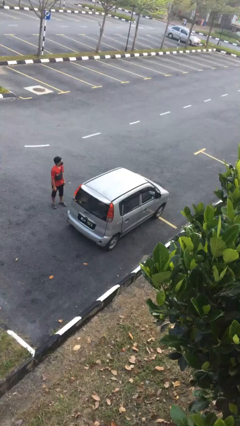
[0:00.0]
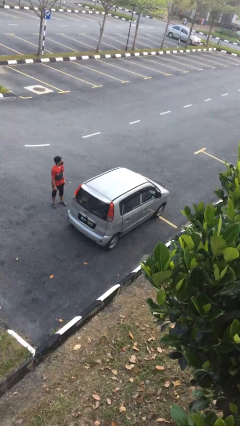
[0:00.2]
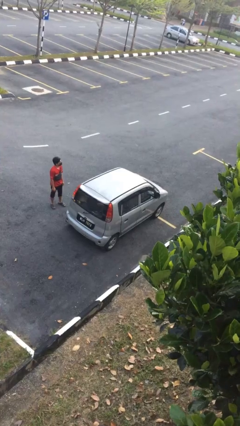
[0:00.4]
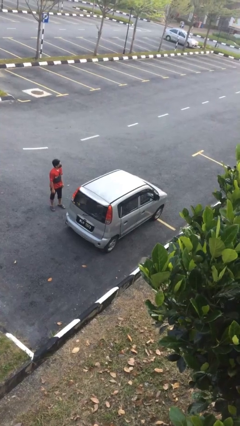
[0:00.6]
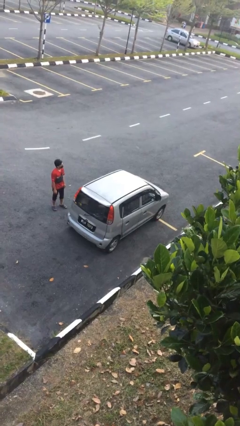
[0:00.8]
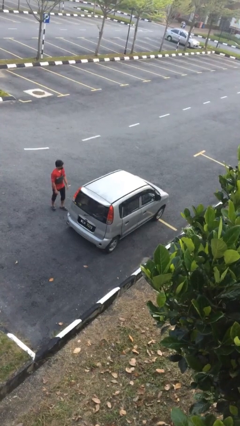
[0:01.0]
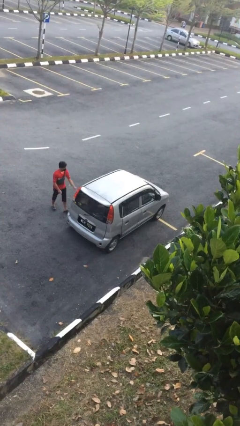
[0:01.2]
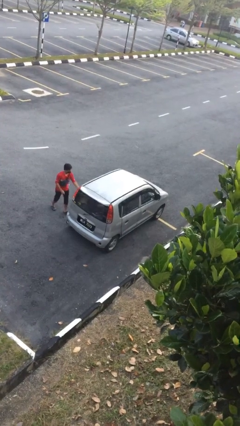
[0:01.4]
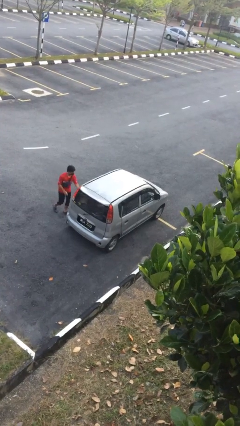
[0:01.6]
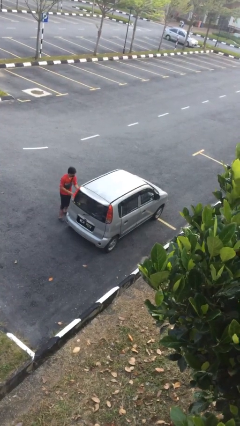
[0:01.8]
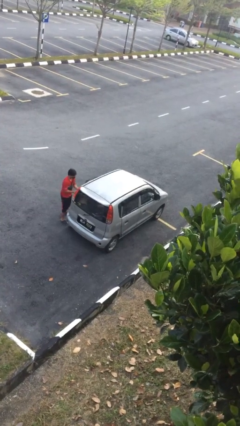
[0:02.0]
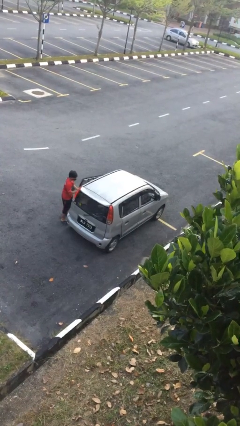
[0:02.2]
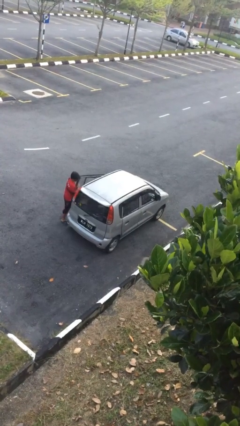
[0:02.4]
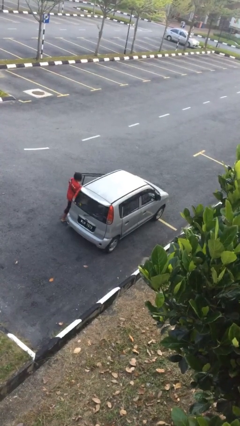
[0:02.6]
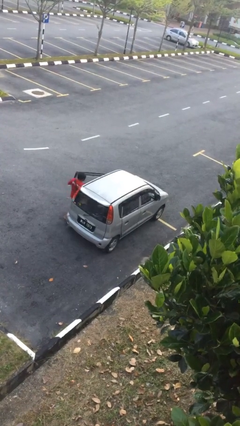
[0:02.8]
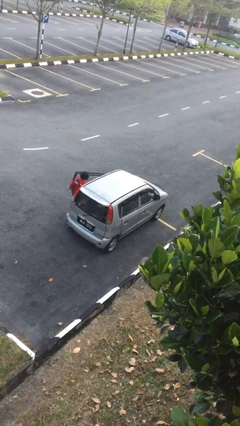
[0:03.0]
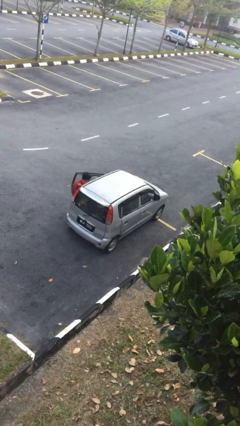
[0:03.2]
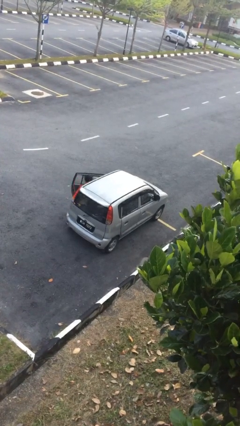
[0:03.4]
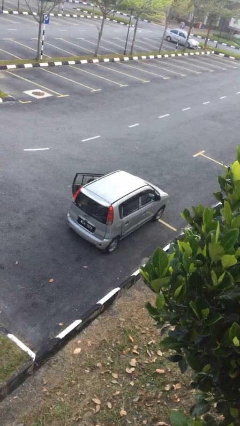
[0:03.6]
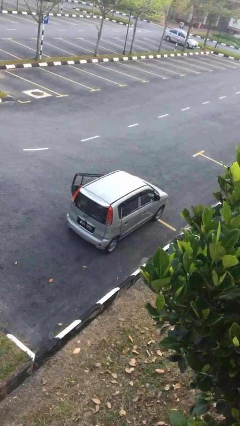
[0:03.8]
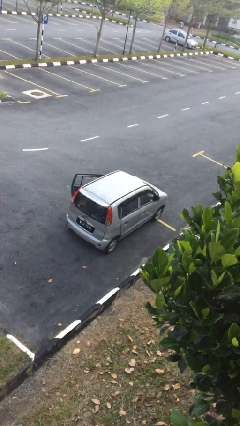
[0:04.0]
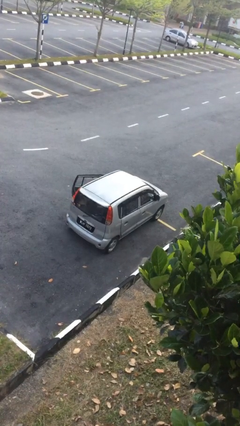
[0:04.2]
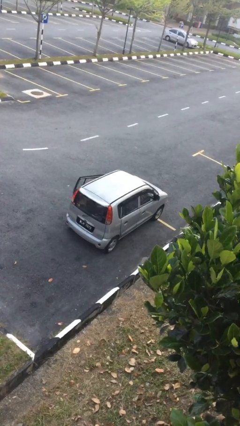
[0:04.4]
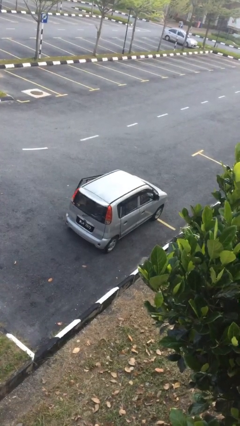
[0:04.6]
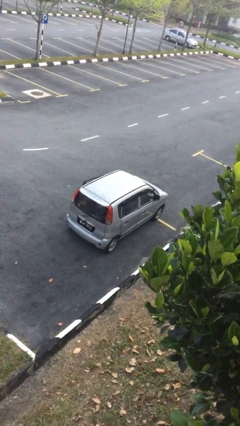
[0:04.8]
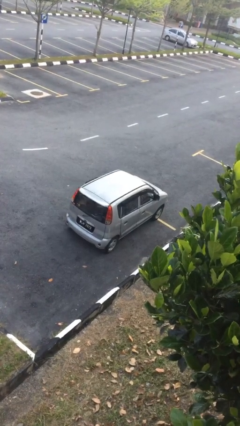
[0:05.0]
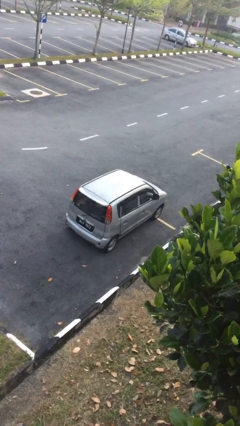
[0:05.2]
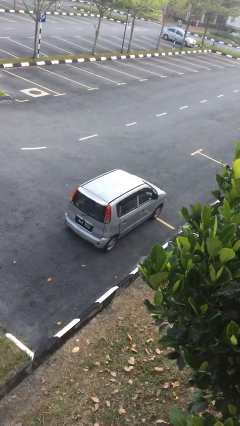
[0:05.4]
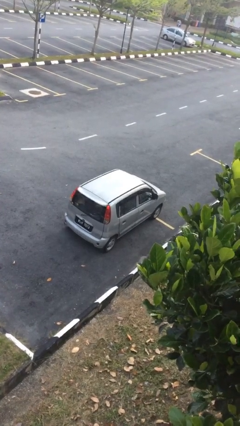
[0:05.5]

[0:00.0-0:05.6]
car picks up person

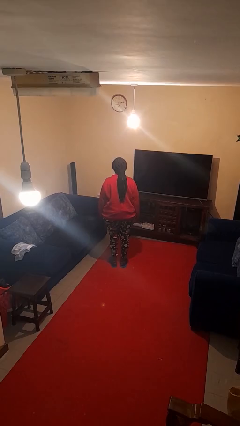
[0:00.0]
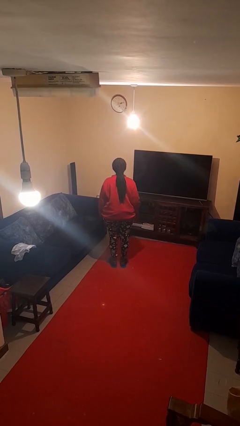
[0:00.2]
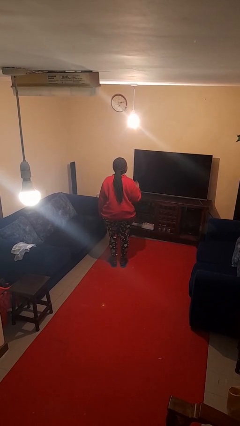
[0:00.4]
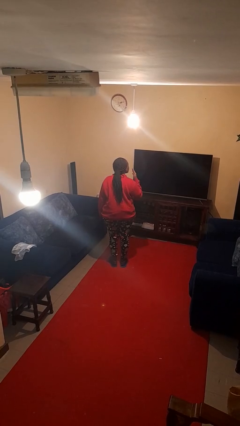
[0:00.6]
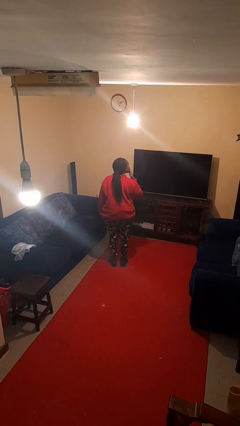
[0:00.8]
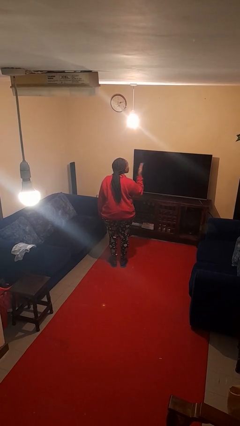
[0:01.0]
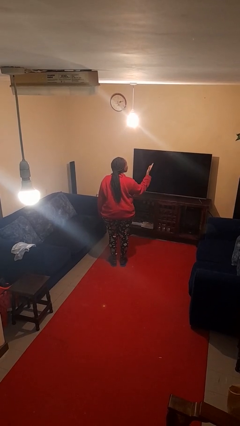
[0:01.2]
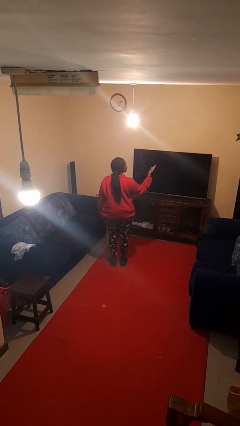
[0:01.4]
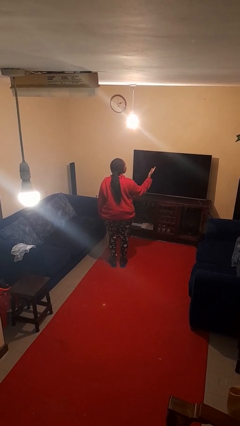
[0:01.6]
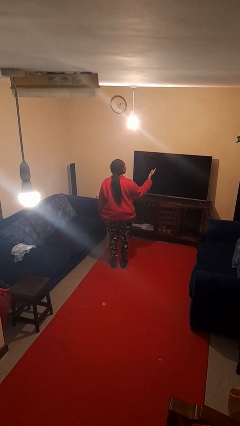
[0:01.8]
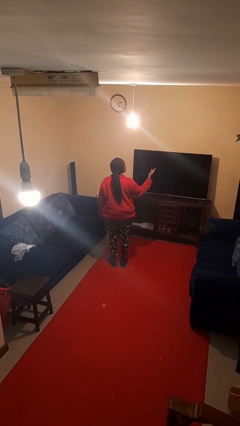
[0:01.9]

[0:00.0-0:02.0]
person gestures blow kiss

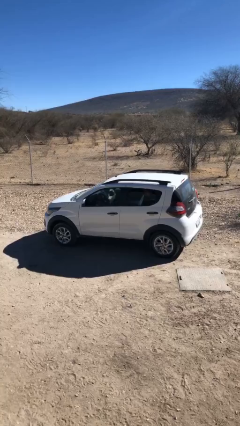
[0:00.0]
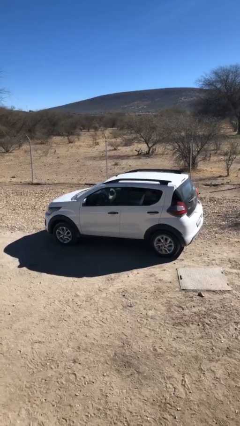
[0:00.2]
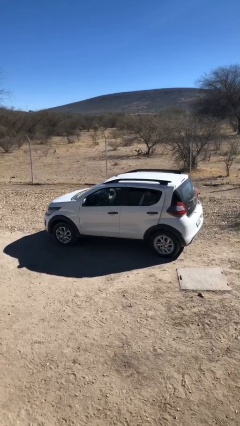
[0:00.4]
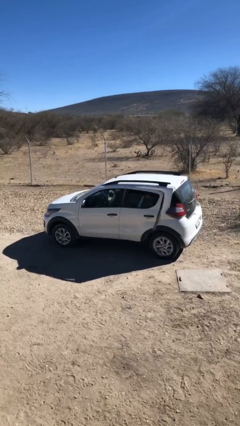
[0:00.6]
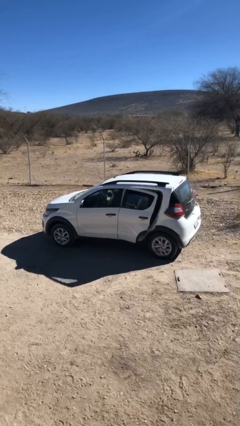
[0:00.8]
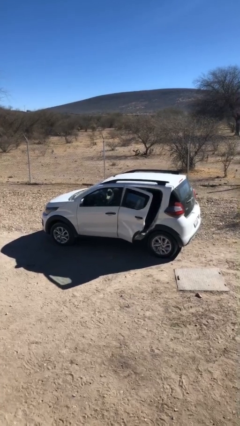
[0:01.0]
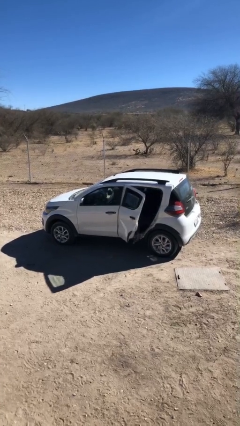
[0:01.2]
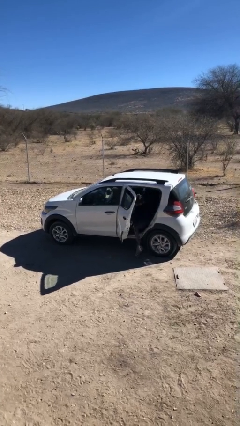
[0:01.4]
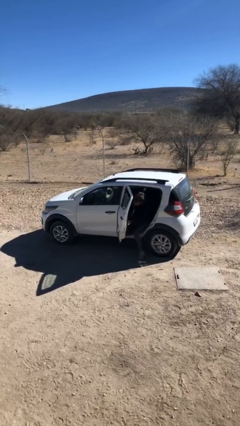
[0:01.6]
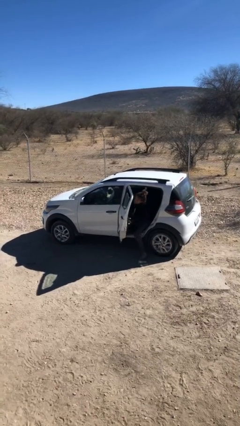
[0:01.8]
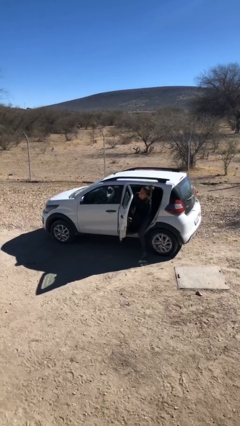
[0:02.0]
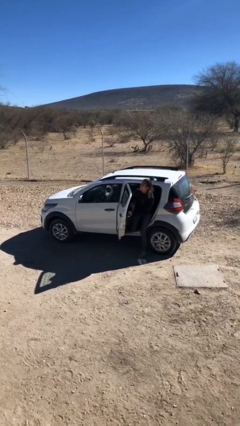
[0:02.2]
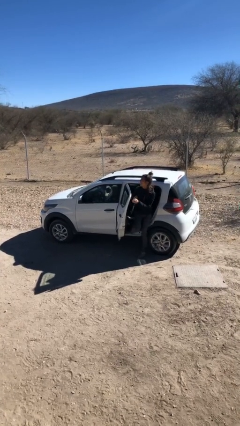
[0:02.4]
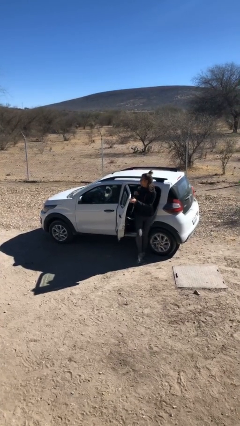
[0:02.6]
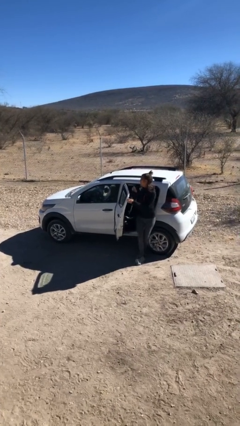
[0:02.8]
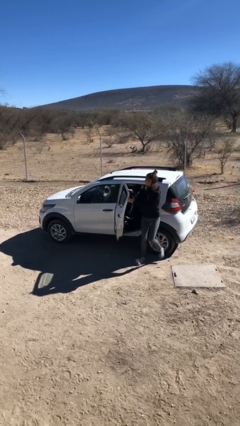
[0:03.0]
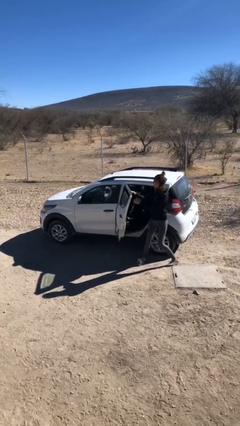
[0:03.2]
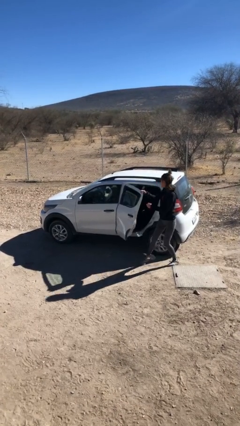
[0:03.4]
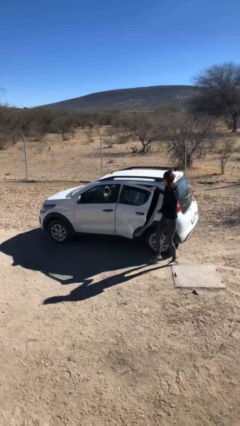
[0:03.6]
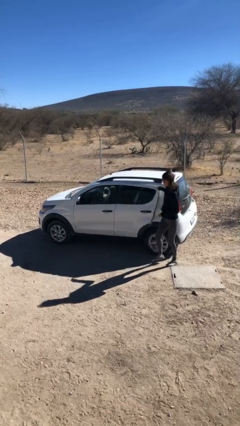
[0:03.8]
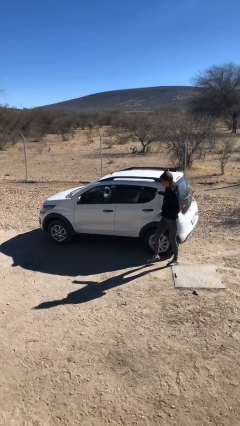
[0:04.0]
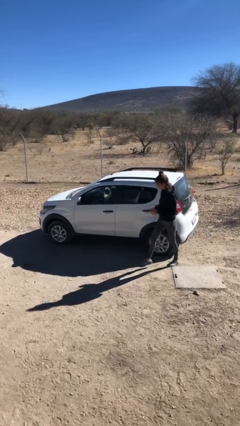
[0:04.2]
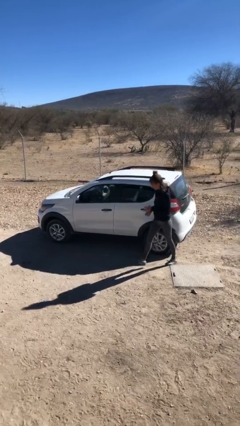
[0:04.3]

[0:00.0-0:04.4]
car drops off person

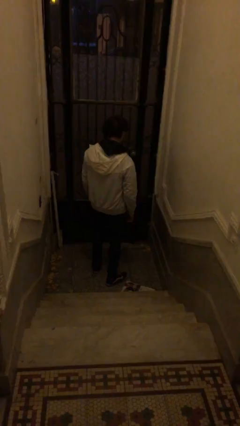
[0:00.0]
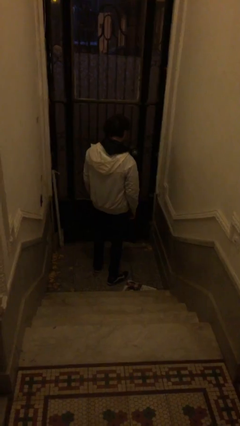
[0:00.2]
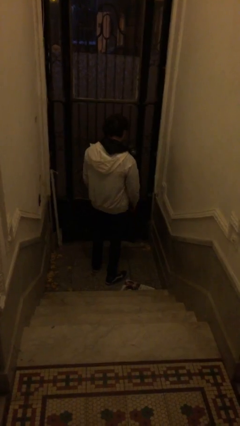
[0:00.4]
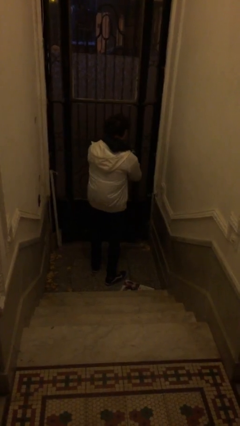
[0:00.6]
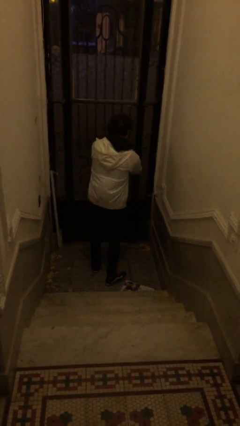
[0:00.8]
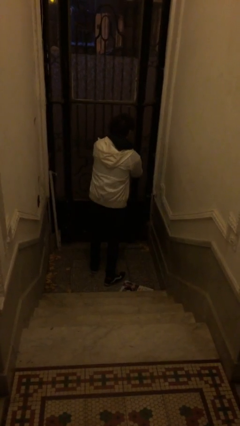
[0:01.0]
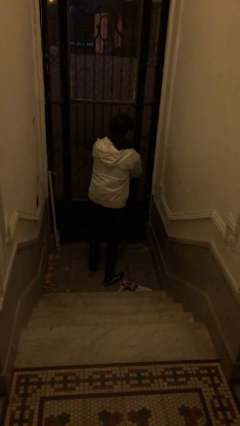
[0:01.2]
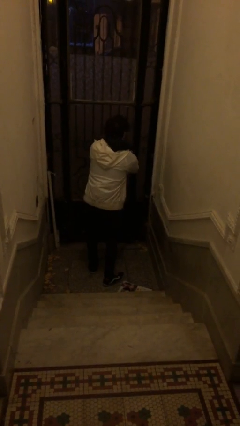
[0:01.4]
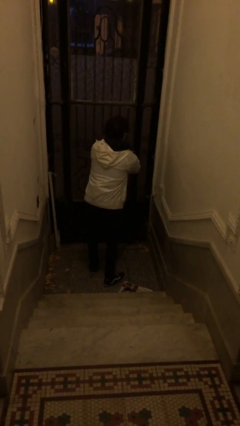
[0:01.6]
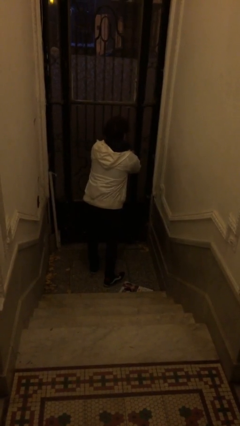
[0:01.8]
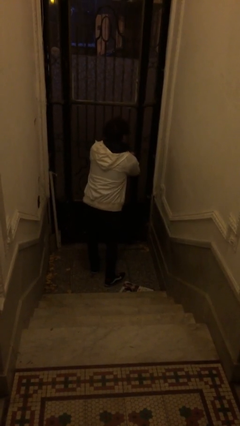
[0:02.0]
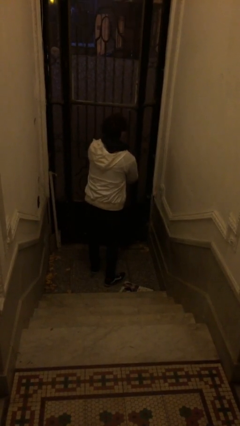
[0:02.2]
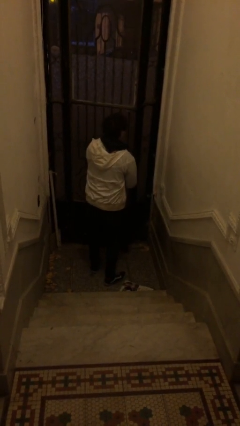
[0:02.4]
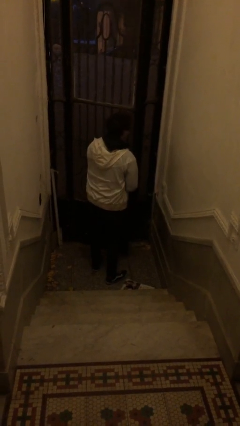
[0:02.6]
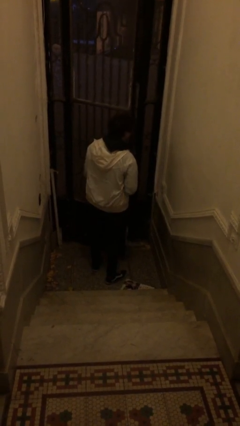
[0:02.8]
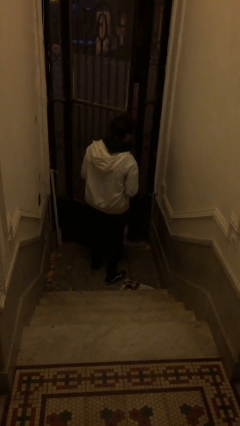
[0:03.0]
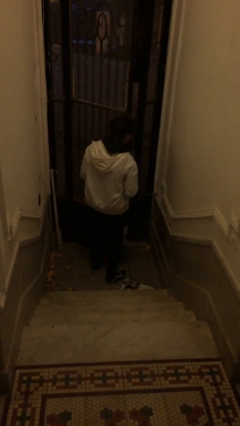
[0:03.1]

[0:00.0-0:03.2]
person opens facility door

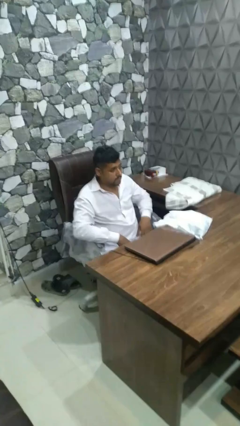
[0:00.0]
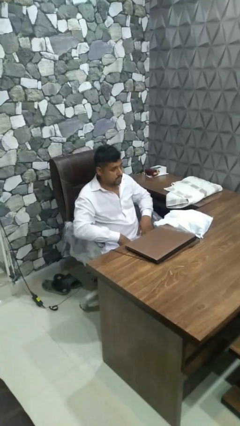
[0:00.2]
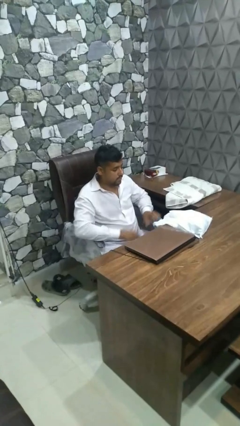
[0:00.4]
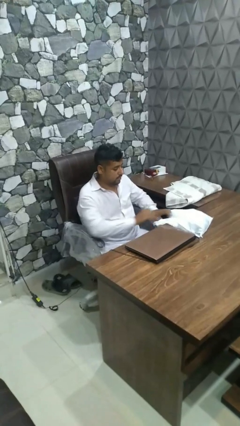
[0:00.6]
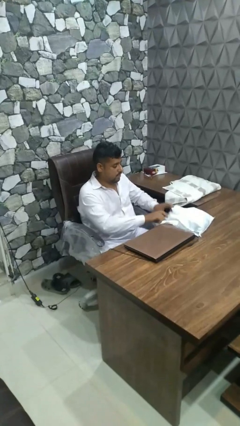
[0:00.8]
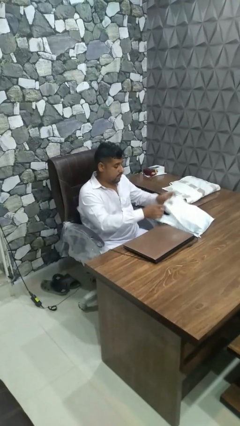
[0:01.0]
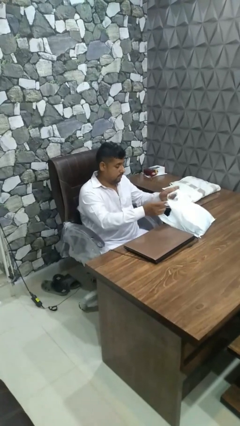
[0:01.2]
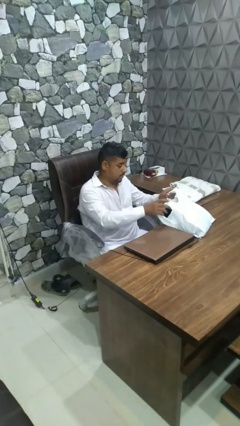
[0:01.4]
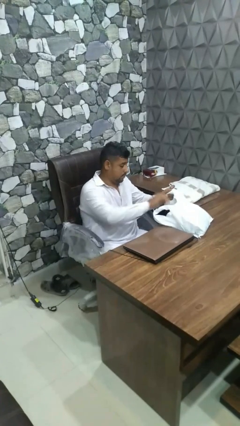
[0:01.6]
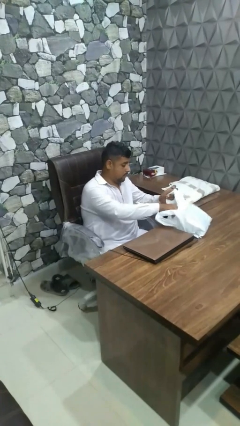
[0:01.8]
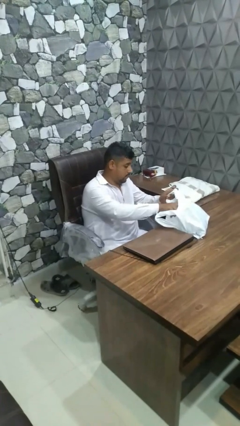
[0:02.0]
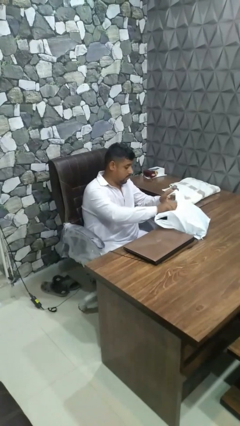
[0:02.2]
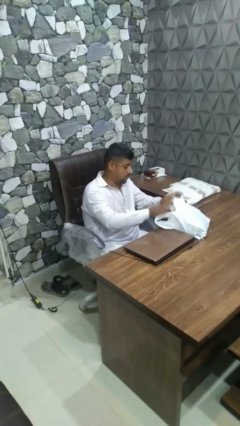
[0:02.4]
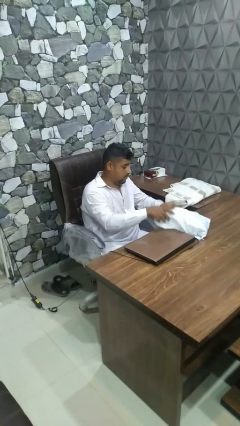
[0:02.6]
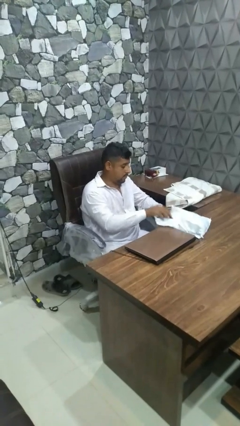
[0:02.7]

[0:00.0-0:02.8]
person searches in bag
